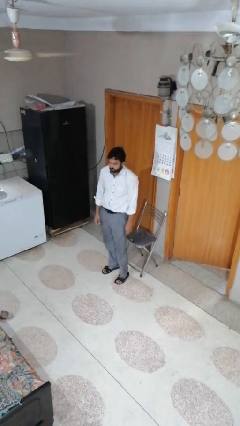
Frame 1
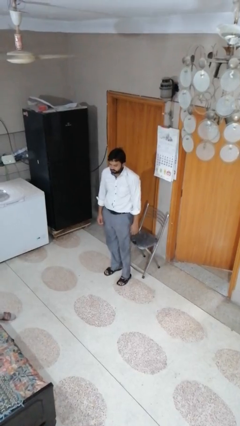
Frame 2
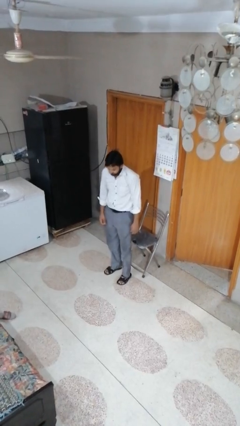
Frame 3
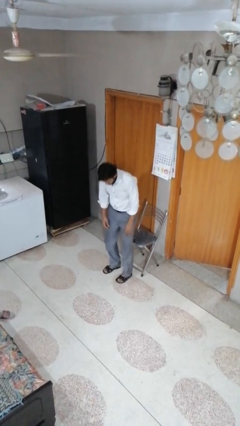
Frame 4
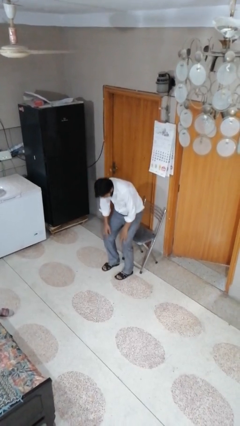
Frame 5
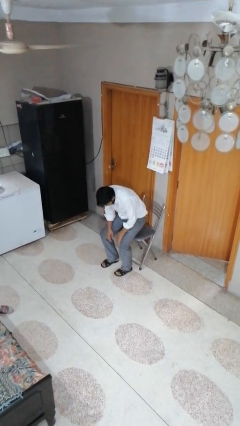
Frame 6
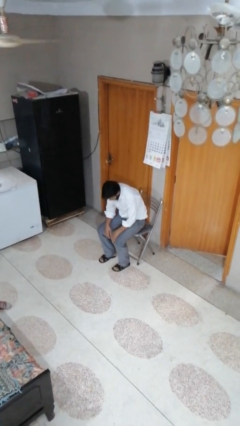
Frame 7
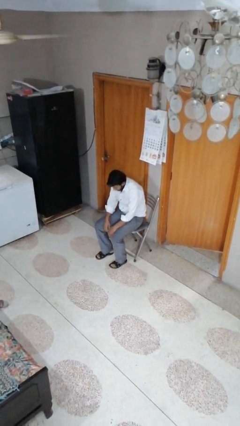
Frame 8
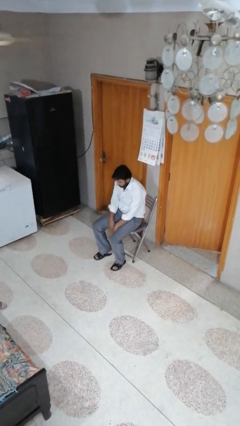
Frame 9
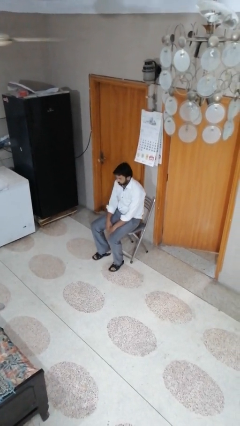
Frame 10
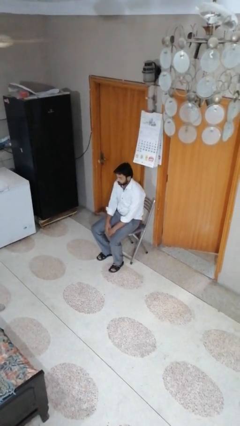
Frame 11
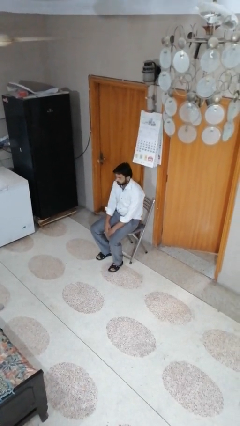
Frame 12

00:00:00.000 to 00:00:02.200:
person sits down

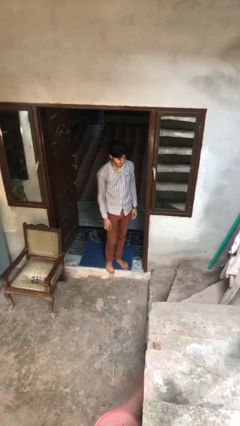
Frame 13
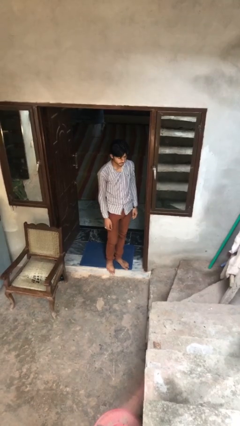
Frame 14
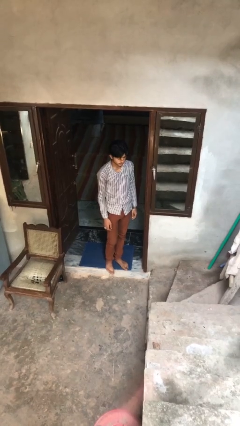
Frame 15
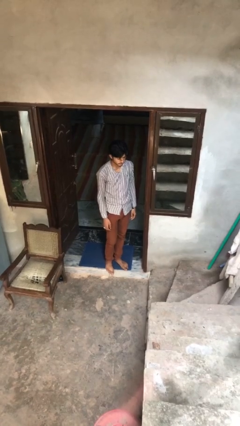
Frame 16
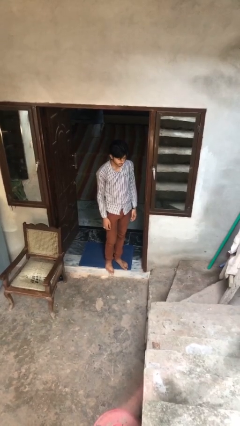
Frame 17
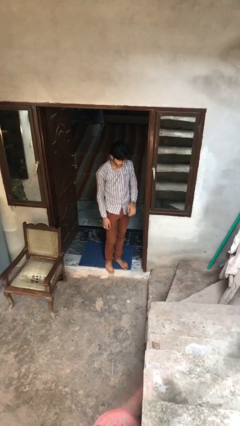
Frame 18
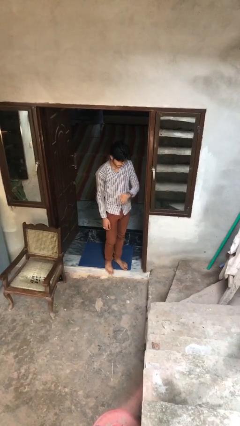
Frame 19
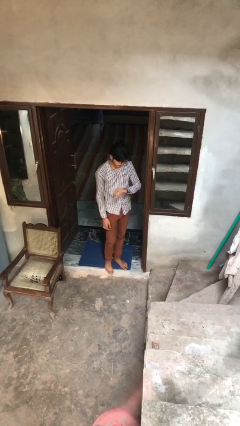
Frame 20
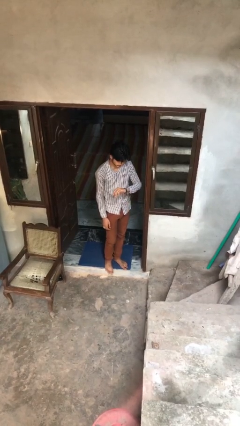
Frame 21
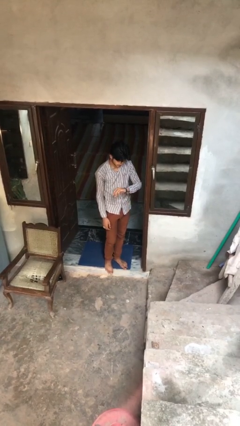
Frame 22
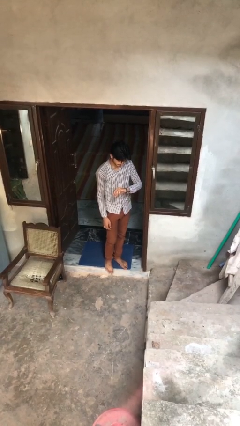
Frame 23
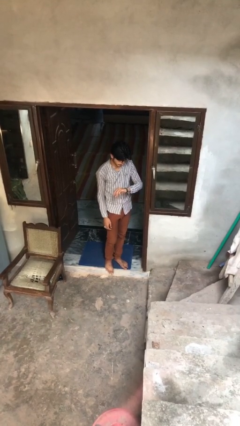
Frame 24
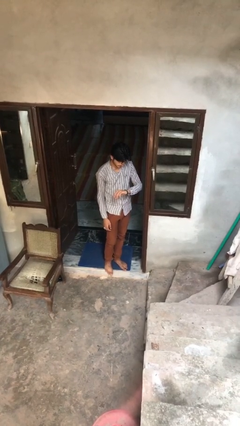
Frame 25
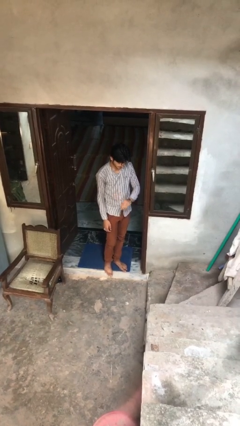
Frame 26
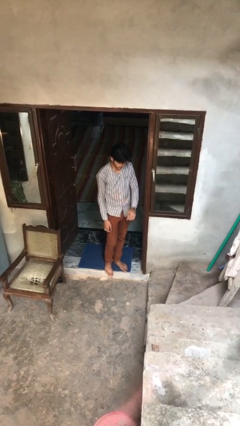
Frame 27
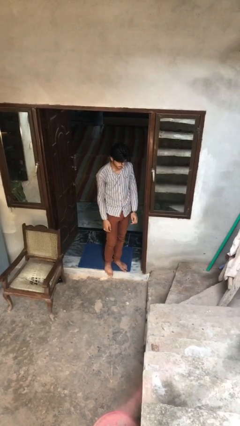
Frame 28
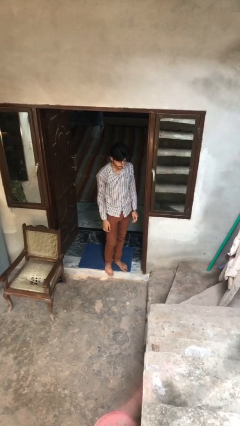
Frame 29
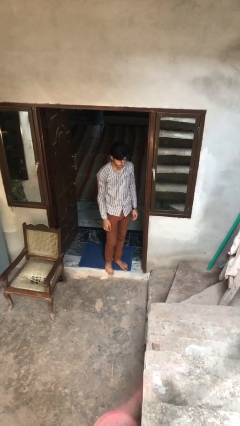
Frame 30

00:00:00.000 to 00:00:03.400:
person looks at wristwatch

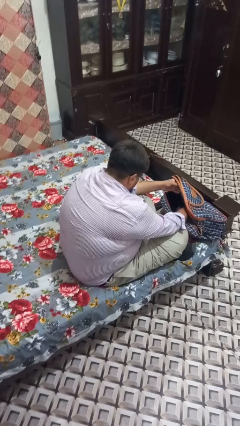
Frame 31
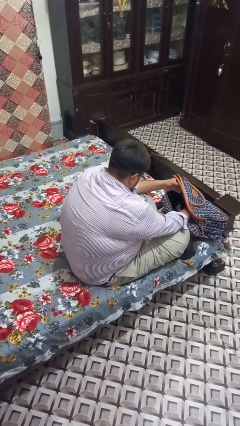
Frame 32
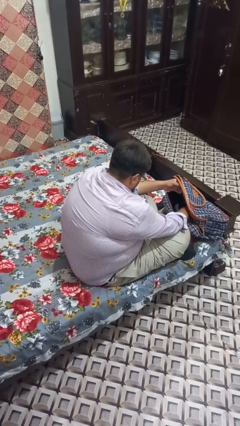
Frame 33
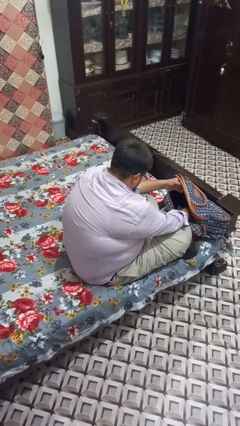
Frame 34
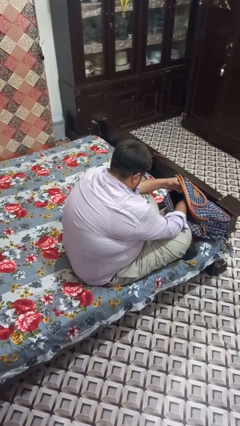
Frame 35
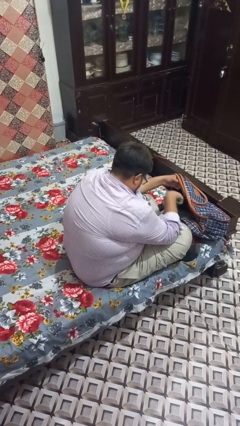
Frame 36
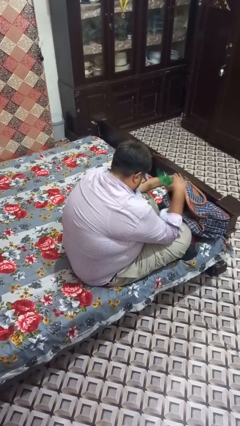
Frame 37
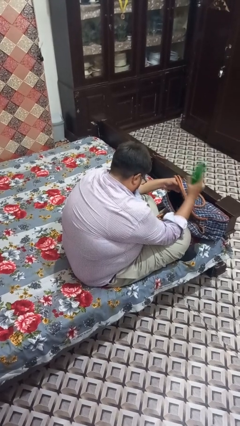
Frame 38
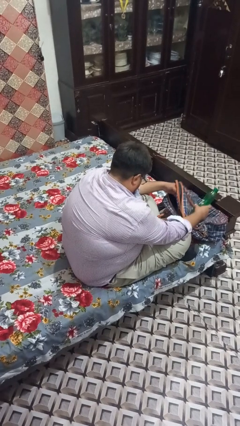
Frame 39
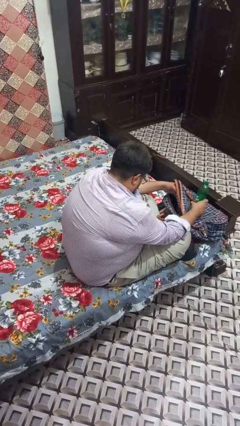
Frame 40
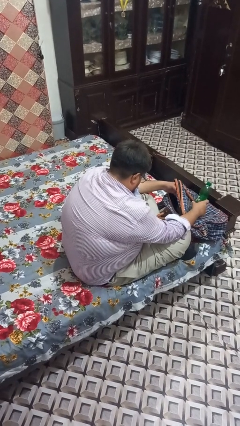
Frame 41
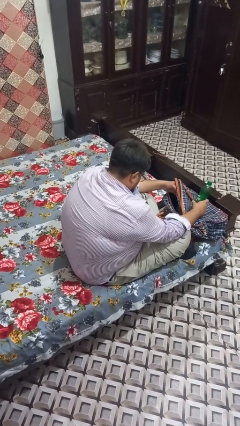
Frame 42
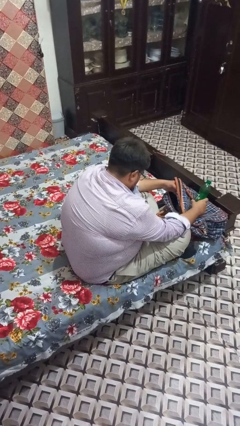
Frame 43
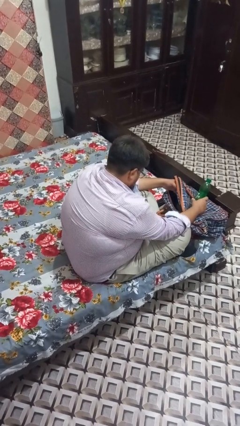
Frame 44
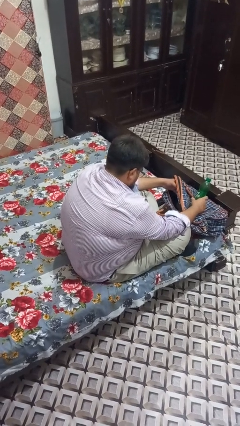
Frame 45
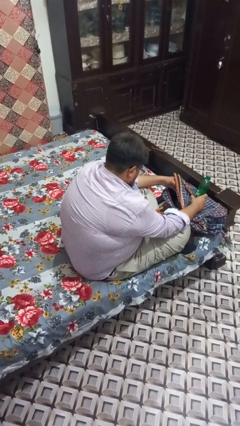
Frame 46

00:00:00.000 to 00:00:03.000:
person takes object from backpack

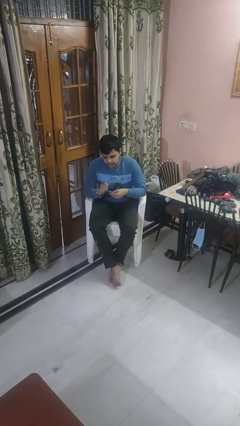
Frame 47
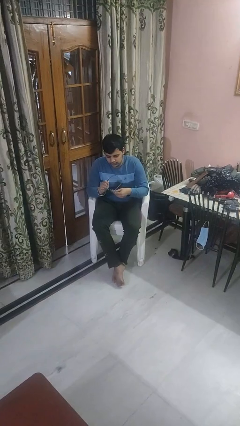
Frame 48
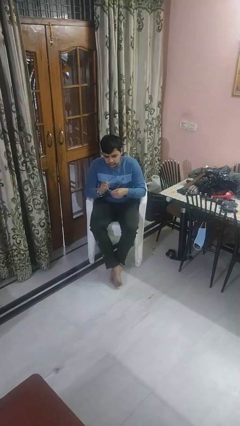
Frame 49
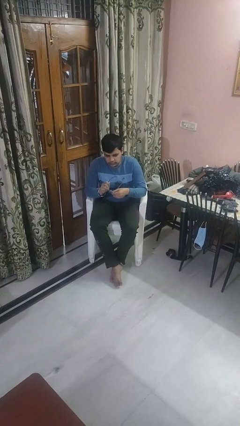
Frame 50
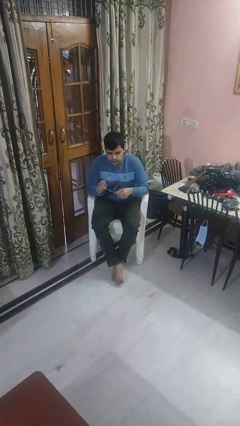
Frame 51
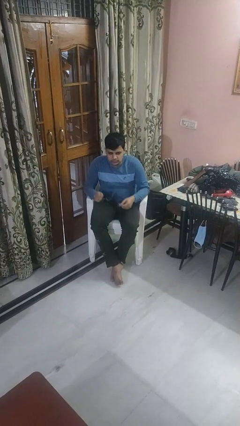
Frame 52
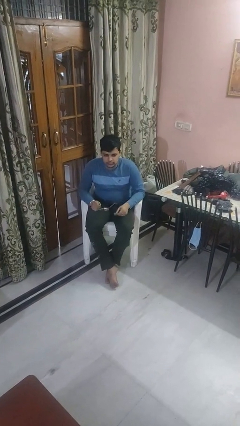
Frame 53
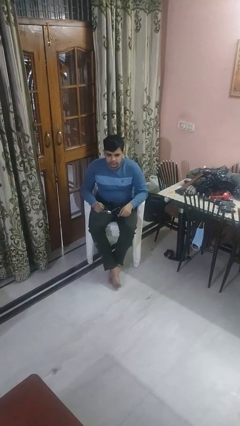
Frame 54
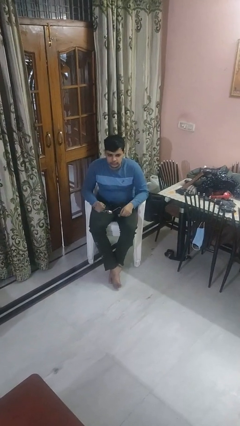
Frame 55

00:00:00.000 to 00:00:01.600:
person cleans eyeglasses

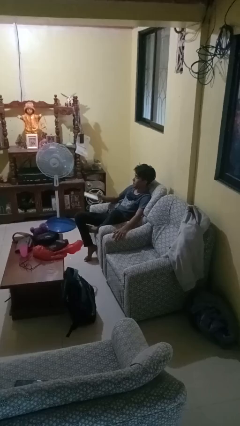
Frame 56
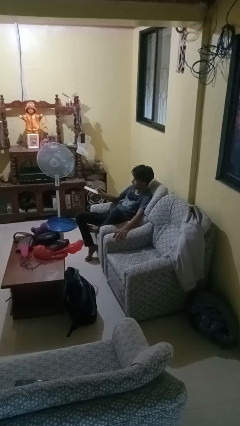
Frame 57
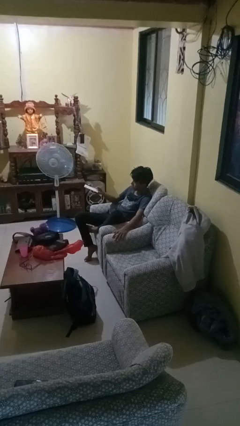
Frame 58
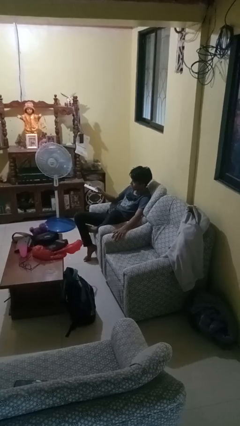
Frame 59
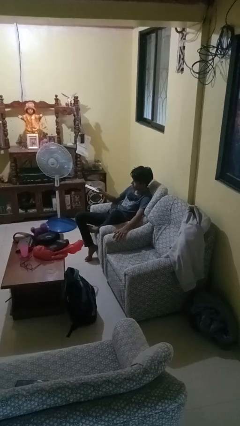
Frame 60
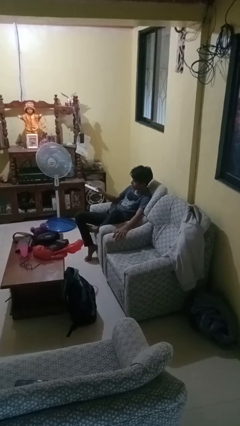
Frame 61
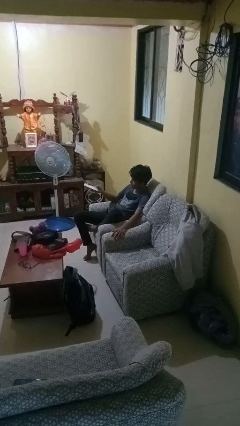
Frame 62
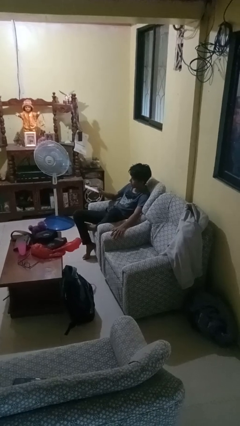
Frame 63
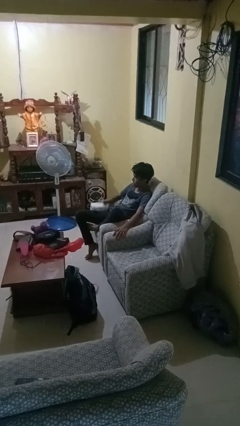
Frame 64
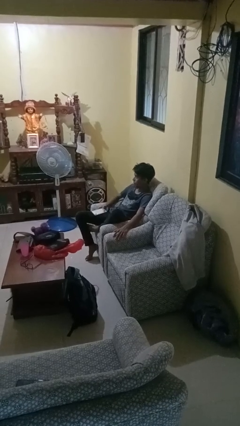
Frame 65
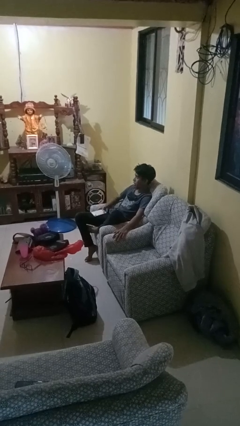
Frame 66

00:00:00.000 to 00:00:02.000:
person uses television remote

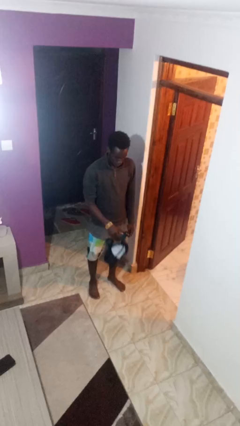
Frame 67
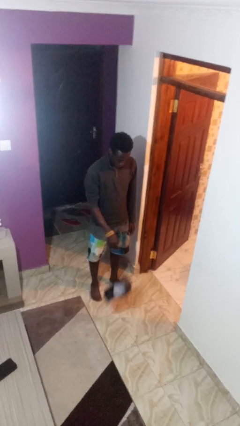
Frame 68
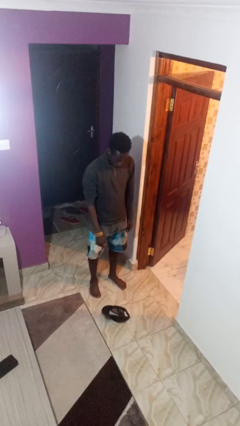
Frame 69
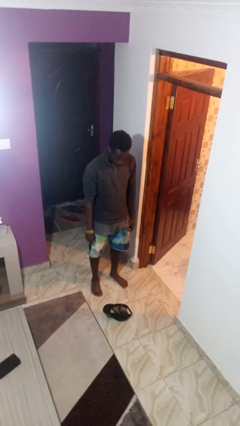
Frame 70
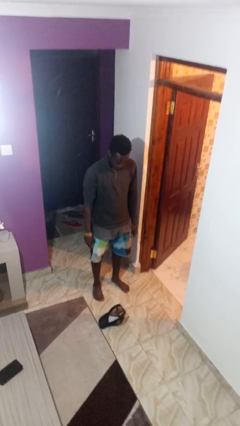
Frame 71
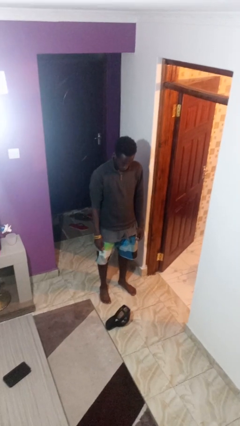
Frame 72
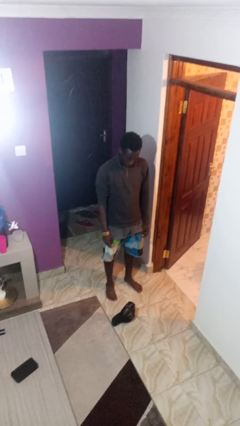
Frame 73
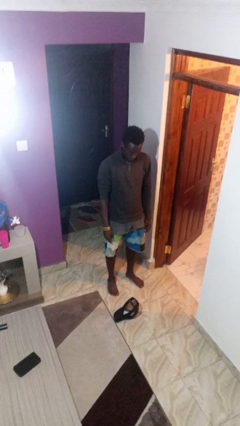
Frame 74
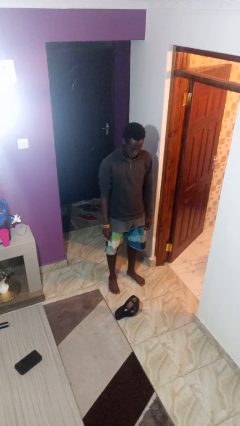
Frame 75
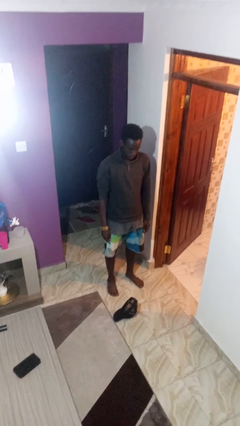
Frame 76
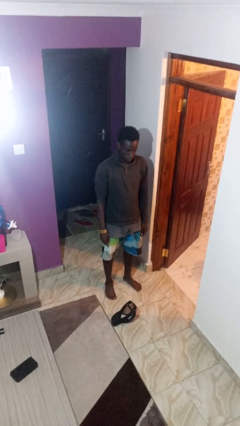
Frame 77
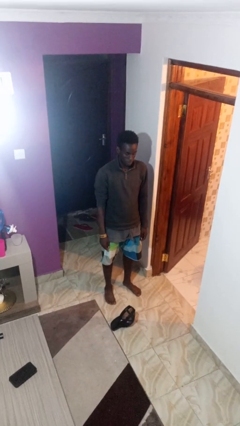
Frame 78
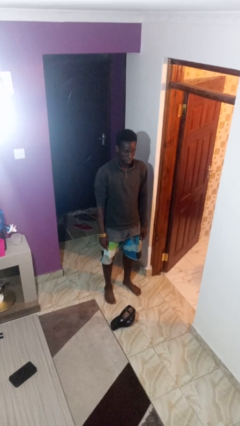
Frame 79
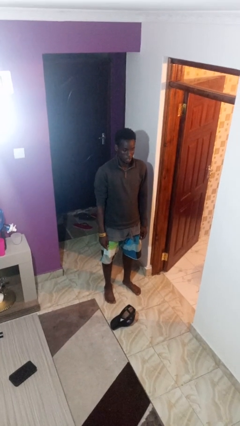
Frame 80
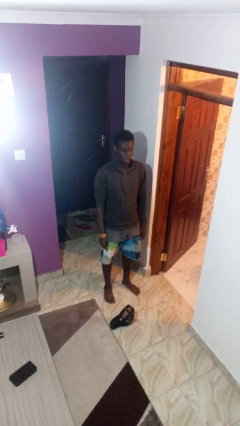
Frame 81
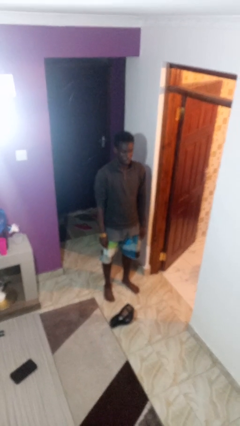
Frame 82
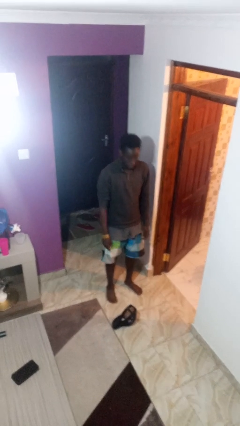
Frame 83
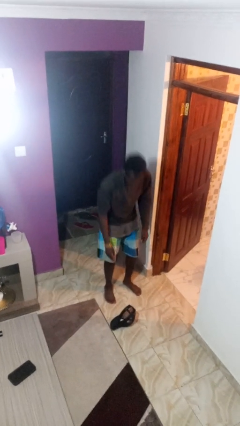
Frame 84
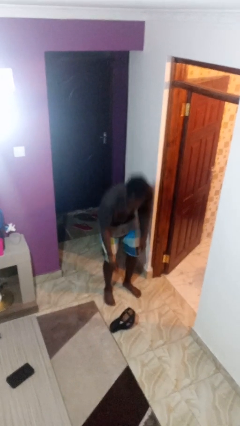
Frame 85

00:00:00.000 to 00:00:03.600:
person drops object

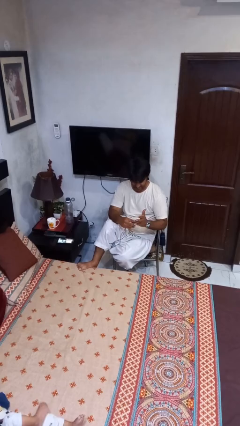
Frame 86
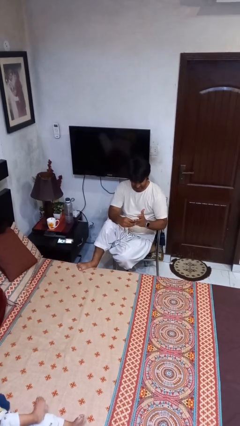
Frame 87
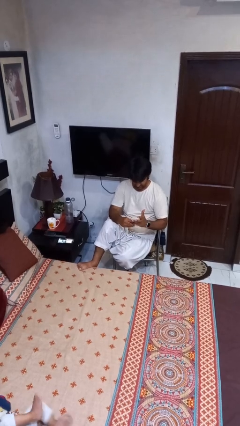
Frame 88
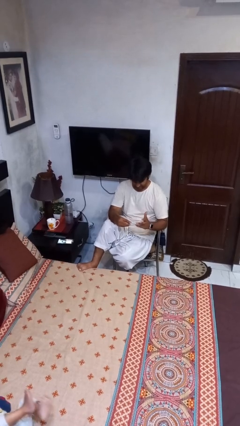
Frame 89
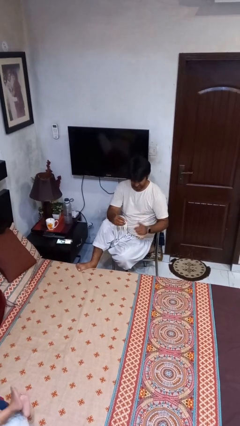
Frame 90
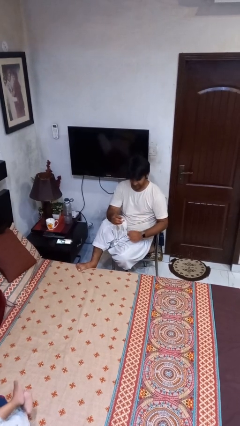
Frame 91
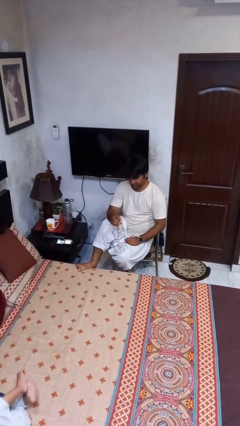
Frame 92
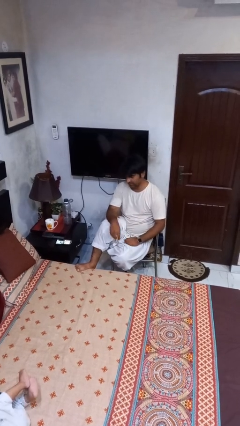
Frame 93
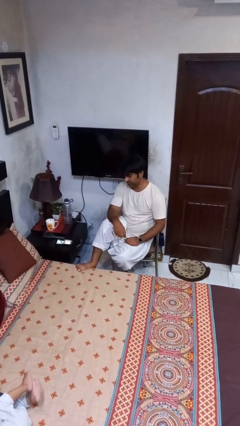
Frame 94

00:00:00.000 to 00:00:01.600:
person takes off ring
